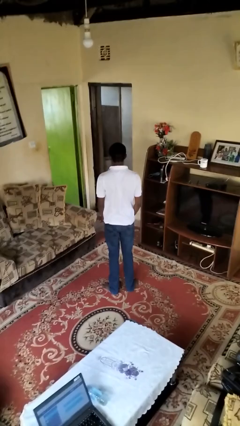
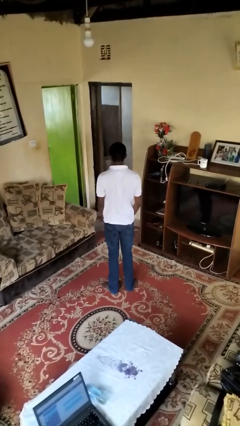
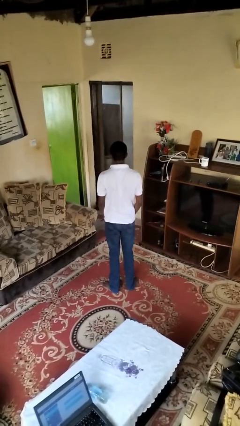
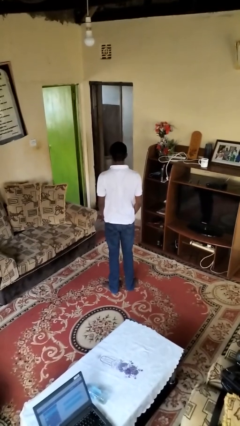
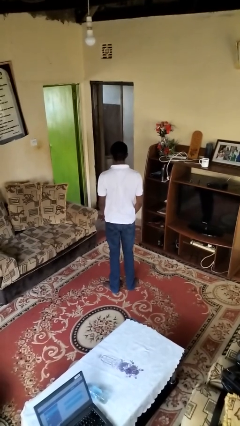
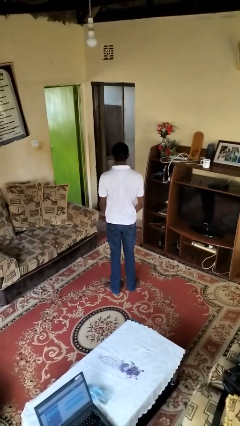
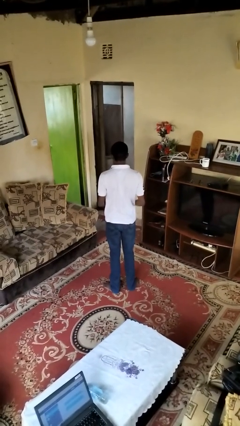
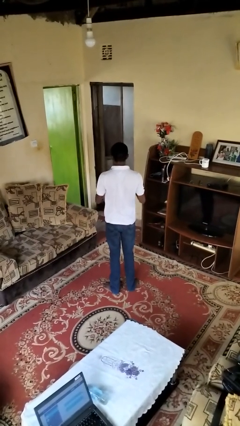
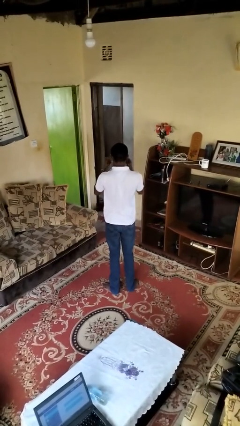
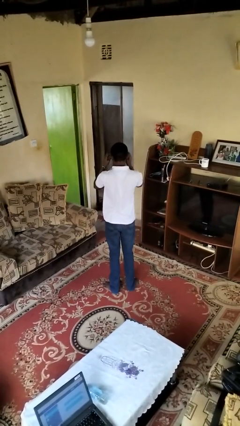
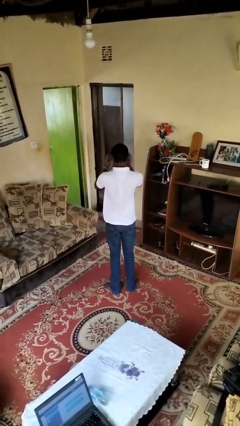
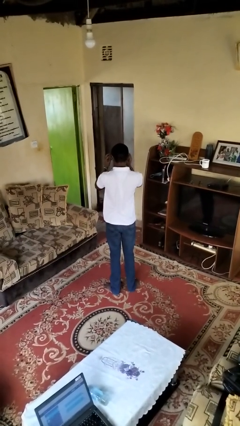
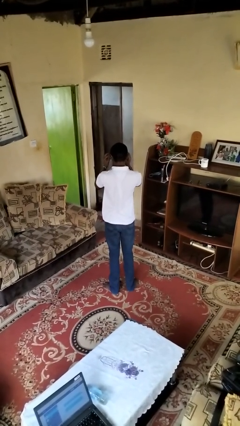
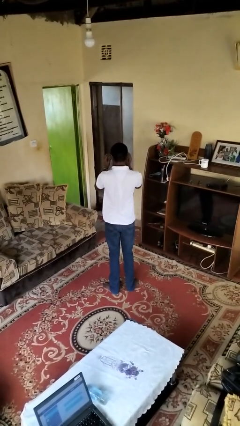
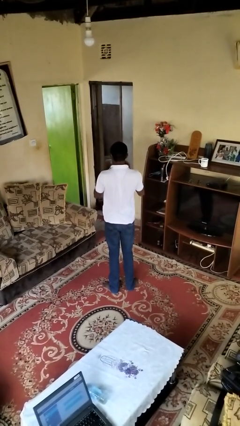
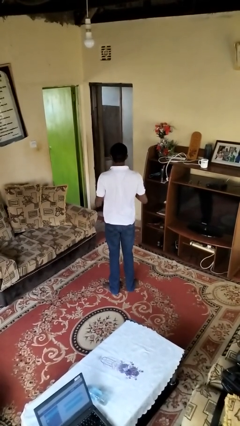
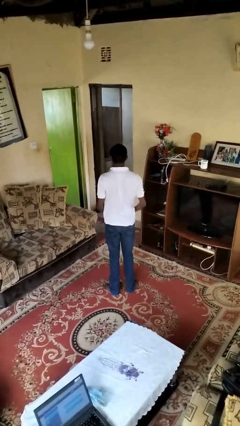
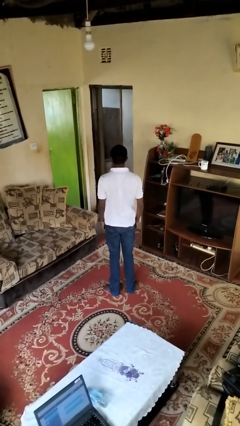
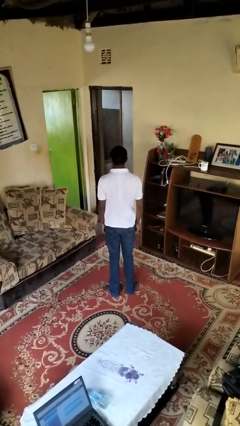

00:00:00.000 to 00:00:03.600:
person puts on sunglasses

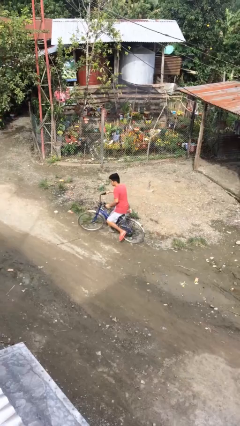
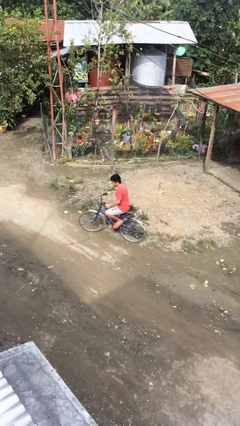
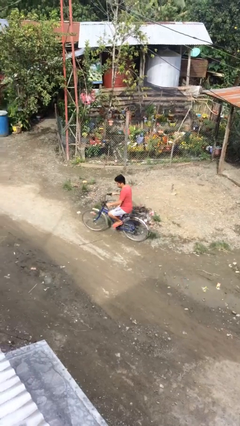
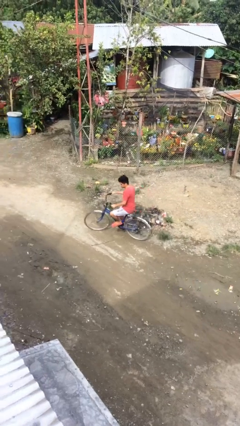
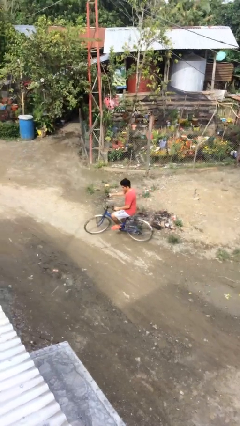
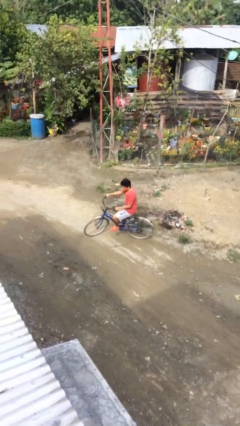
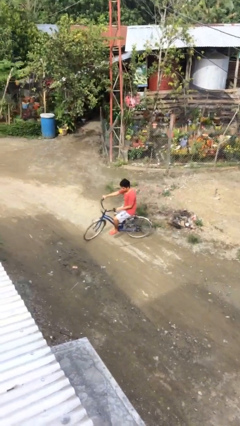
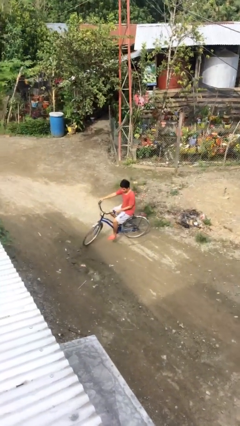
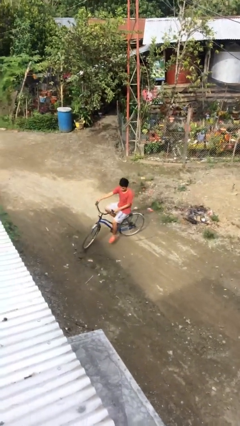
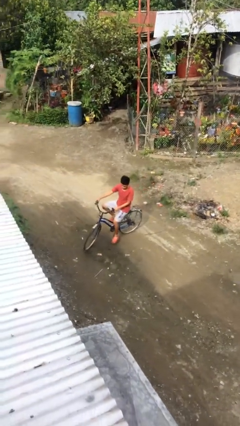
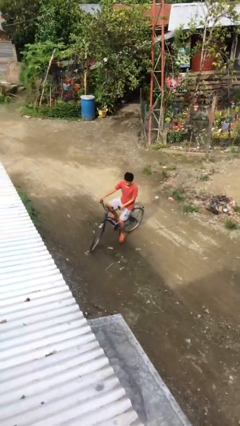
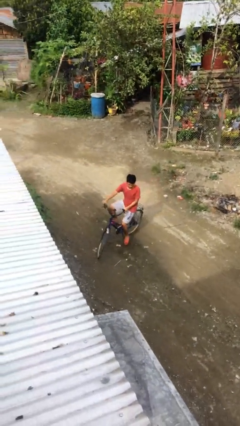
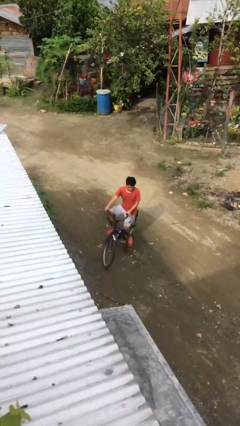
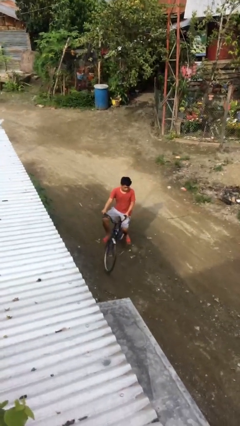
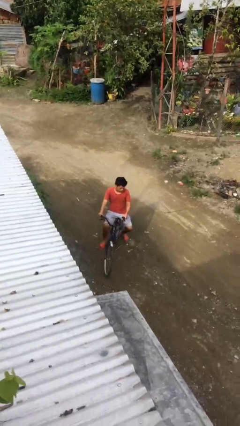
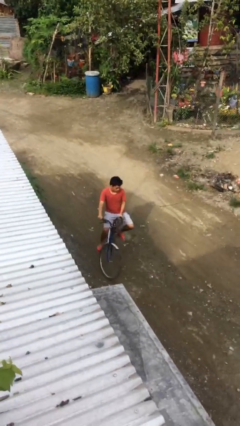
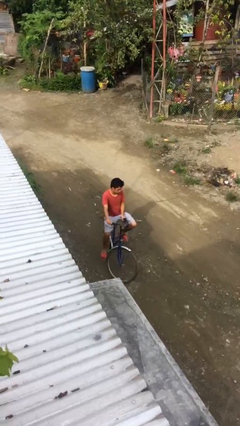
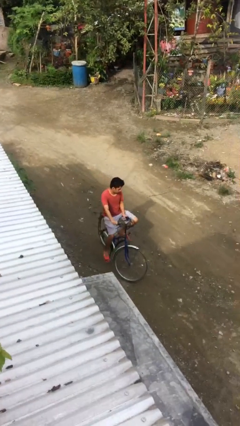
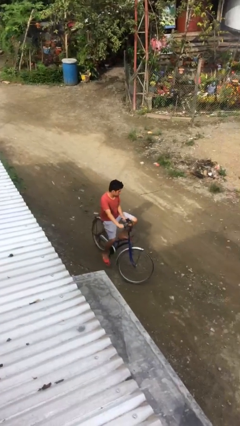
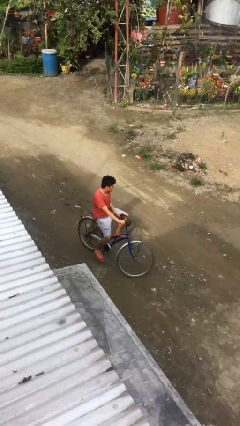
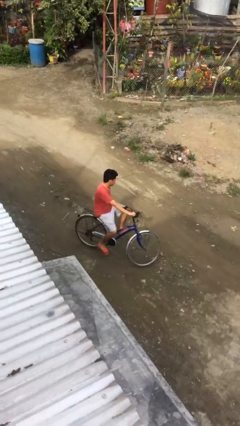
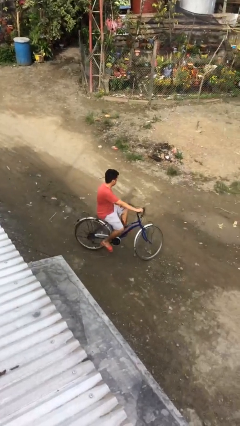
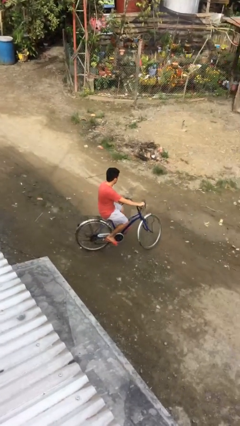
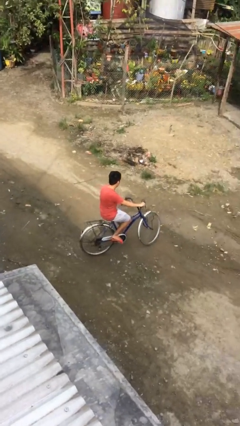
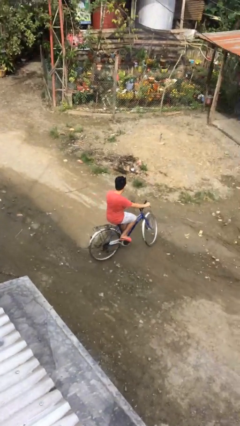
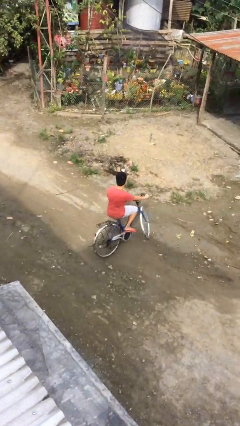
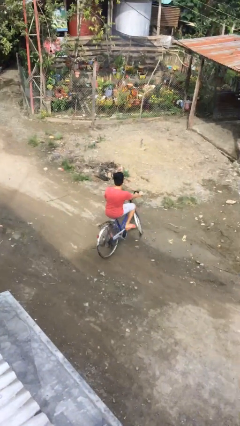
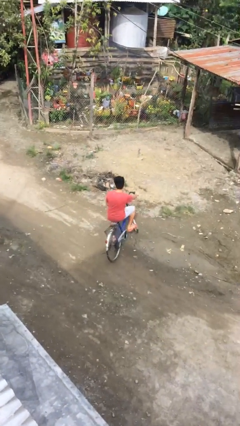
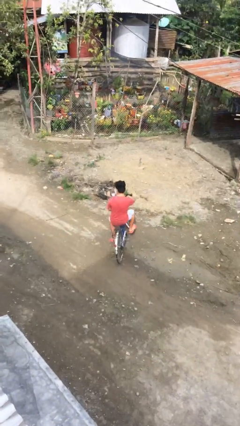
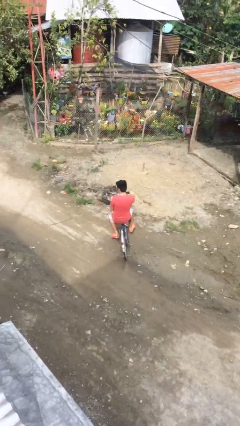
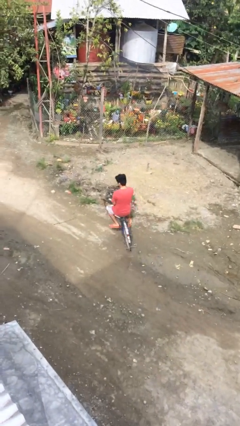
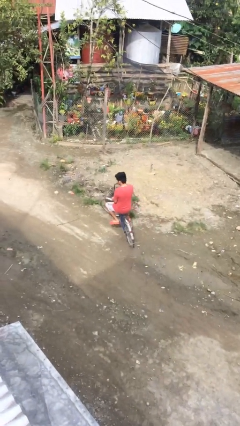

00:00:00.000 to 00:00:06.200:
person rides bicycle

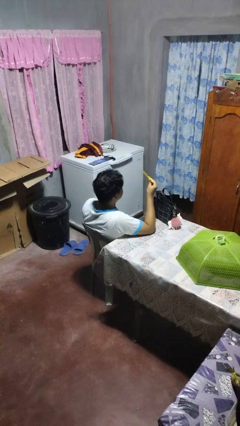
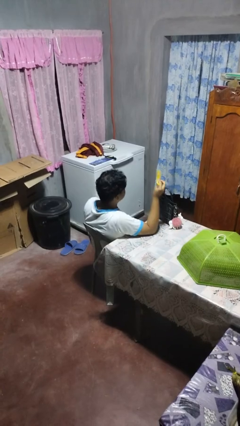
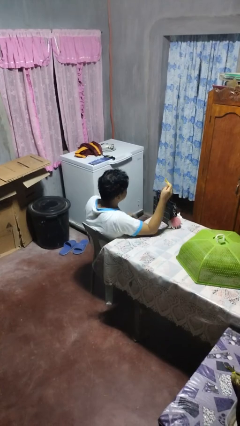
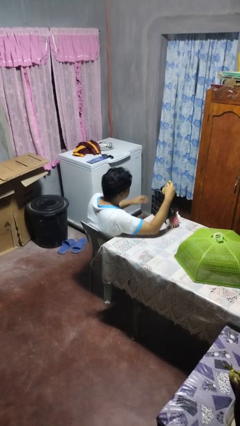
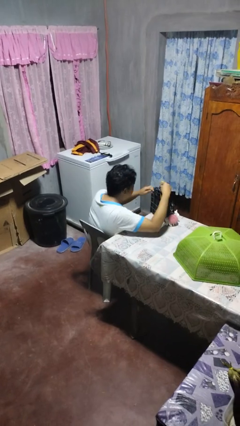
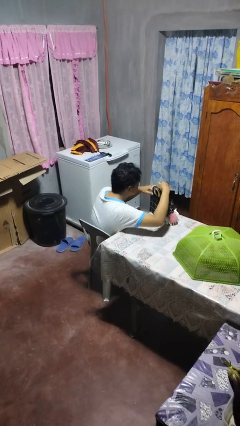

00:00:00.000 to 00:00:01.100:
person puts object into purse

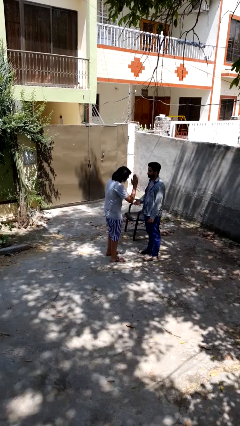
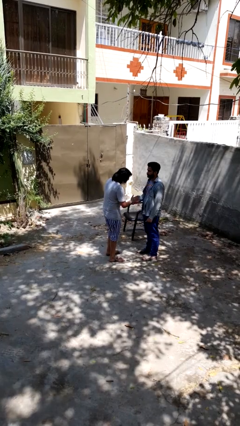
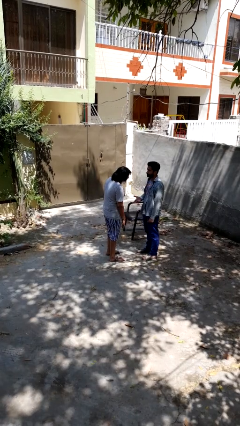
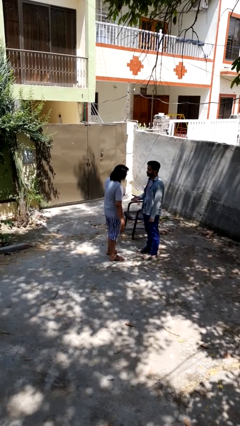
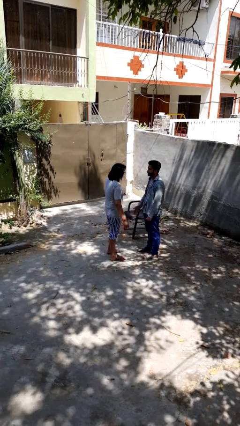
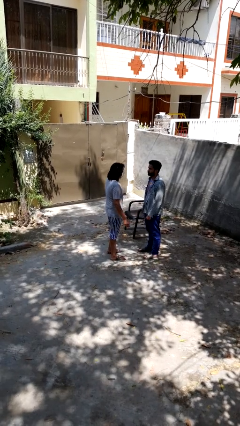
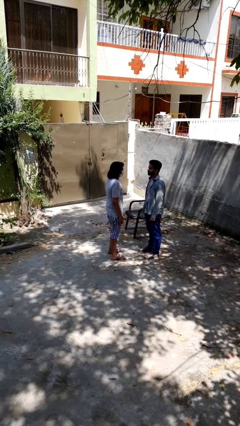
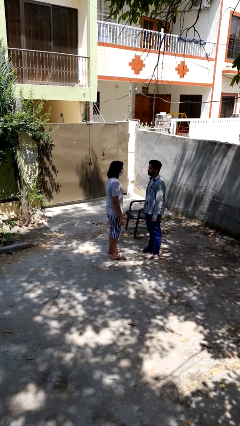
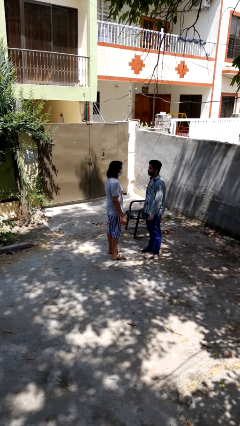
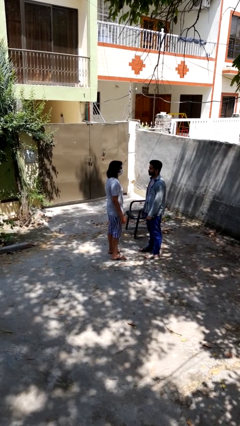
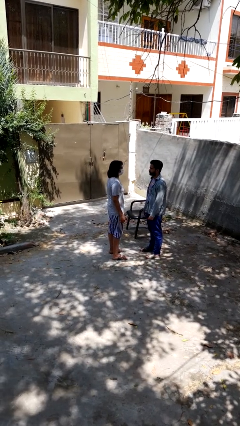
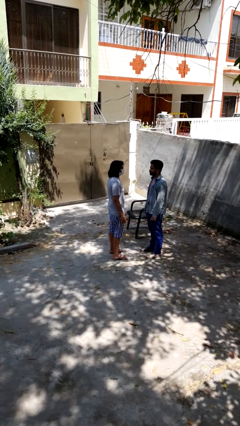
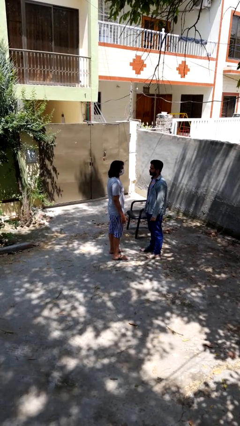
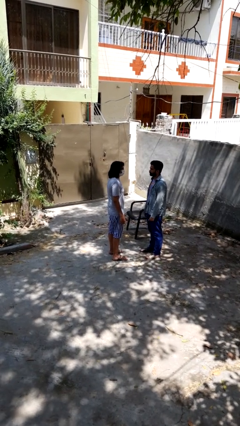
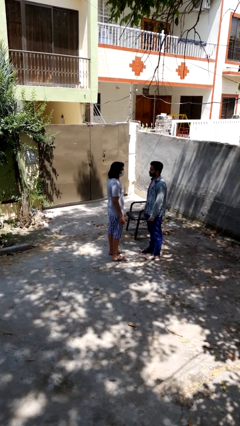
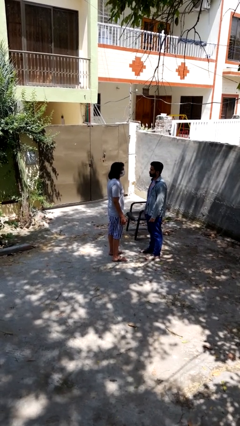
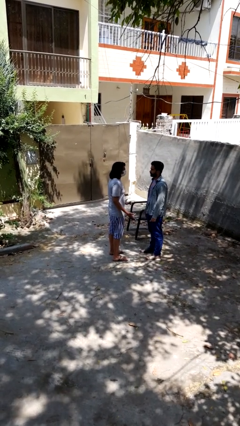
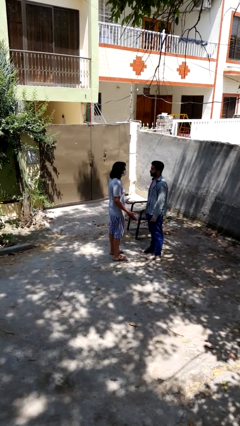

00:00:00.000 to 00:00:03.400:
person highfives hand

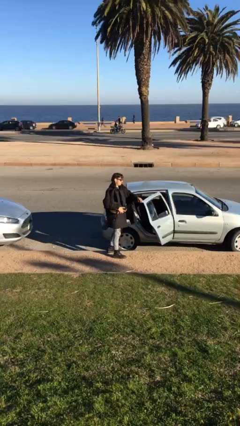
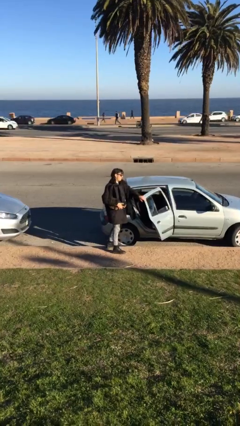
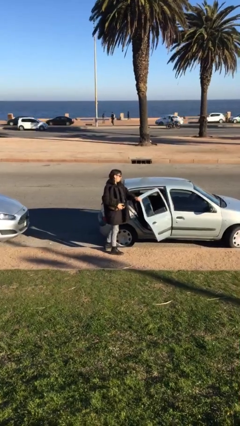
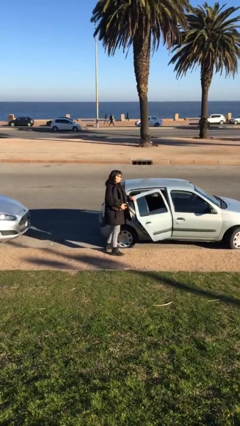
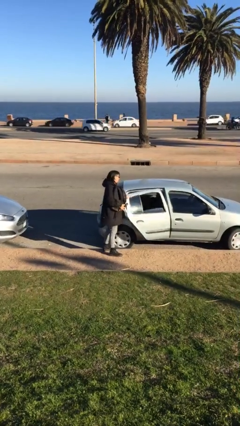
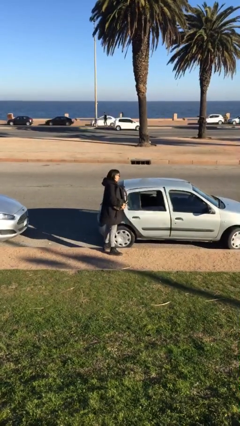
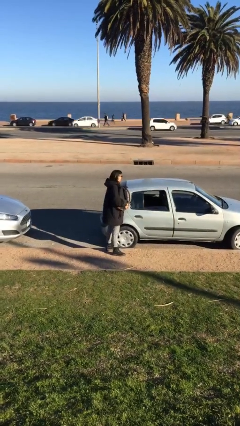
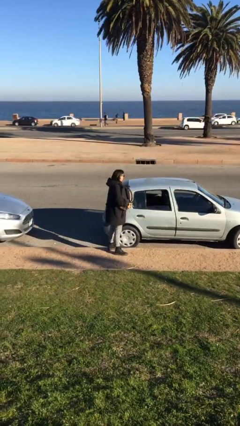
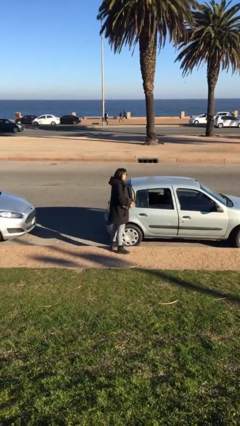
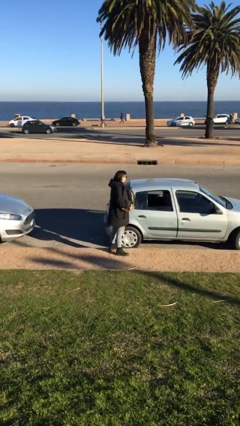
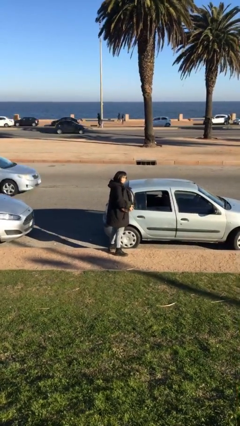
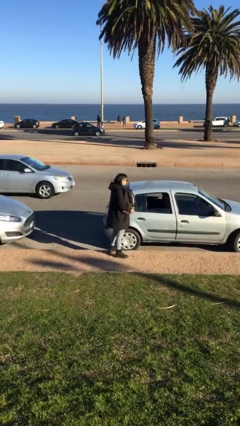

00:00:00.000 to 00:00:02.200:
person closes car door

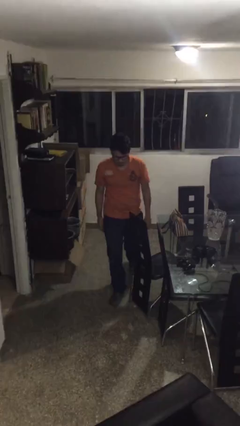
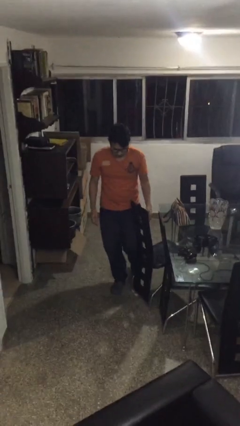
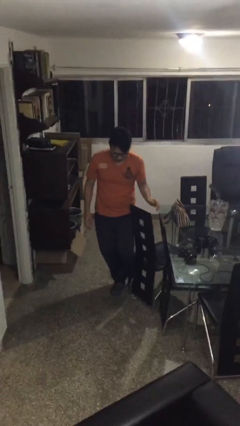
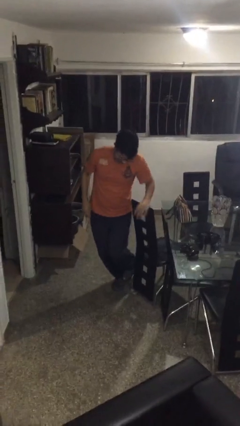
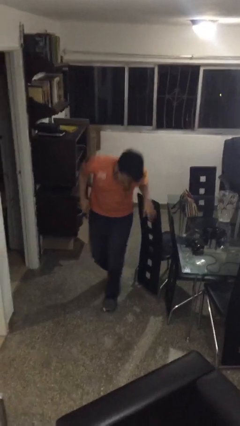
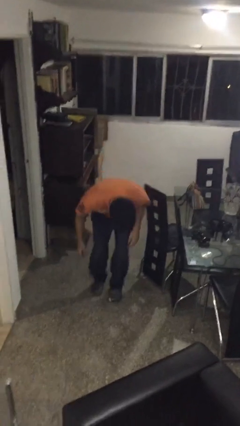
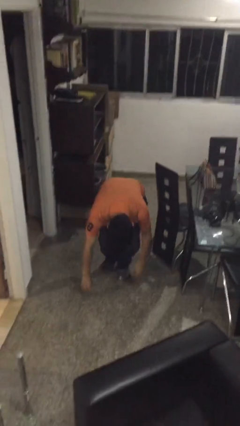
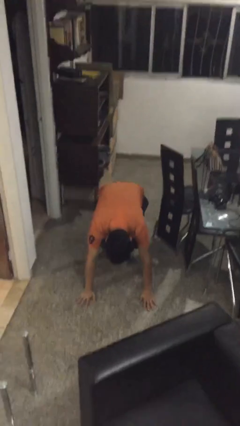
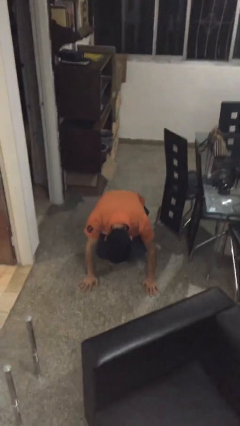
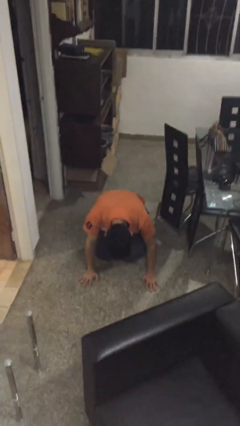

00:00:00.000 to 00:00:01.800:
person trips on object on floor
